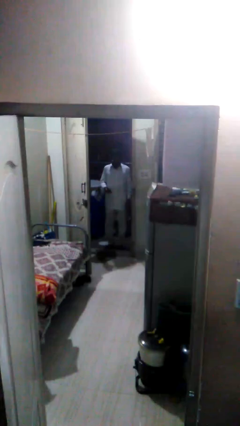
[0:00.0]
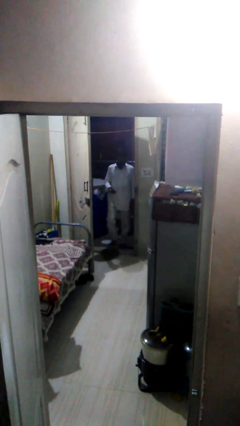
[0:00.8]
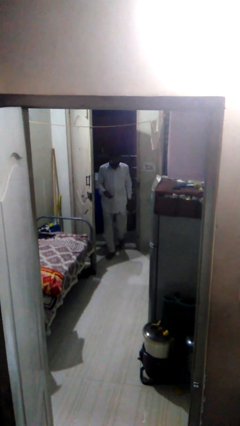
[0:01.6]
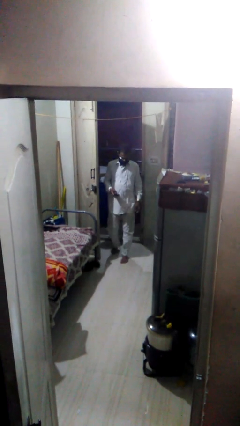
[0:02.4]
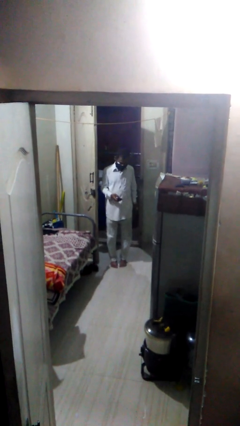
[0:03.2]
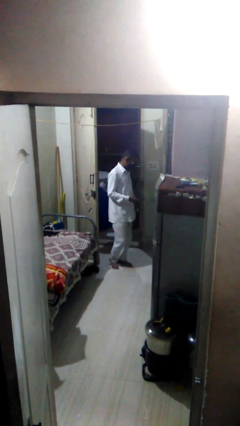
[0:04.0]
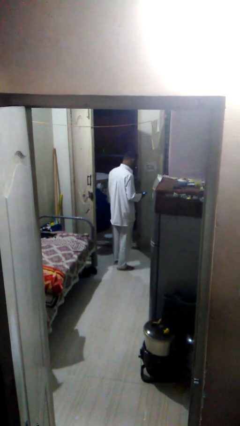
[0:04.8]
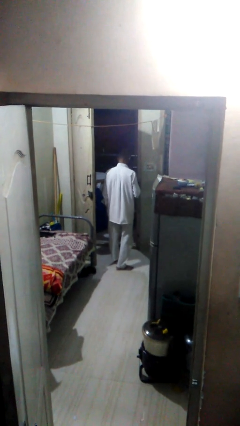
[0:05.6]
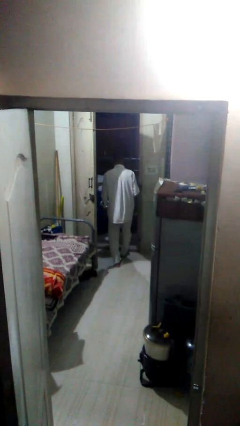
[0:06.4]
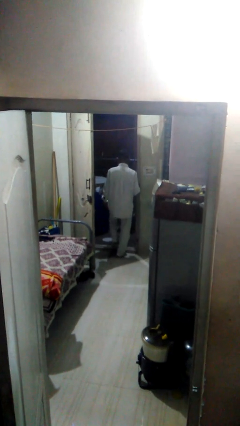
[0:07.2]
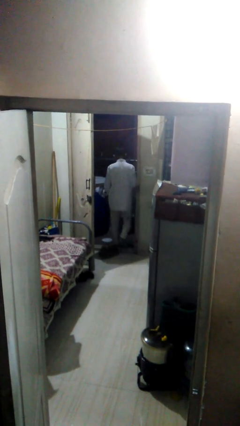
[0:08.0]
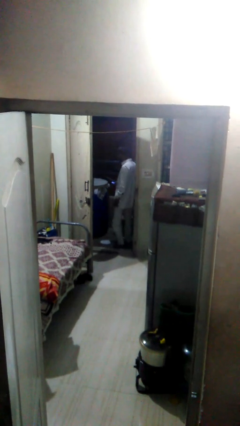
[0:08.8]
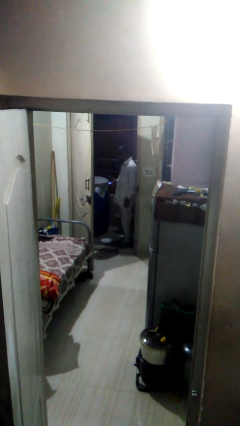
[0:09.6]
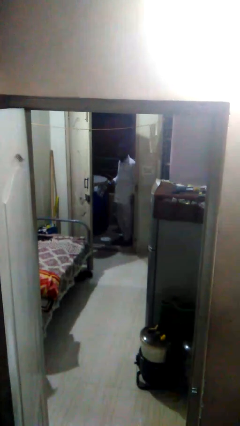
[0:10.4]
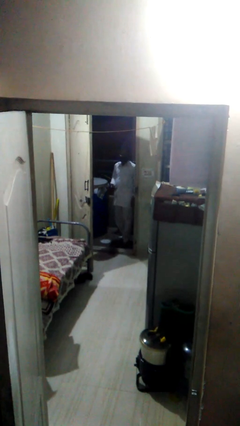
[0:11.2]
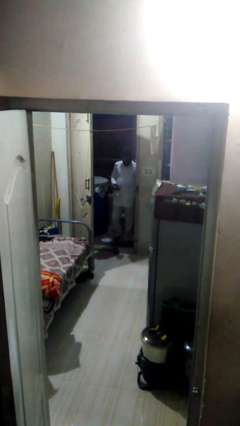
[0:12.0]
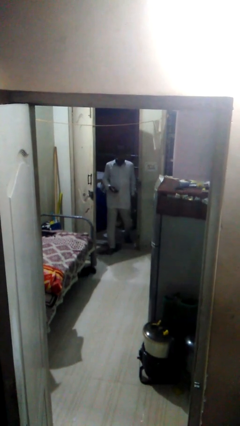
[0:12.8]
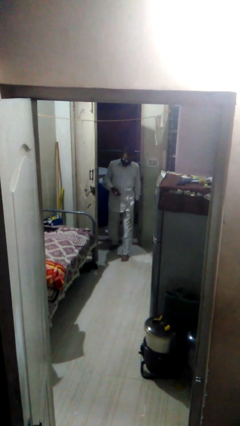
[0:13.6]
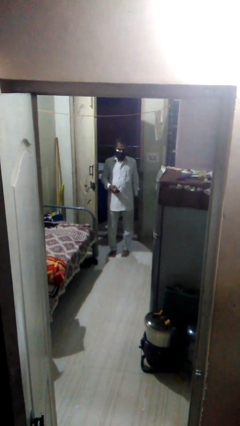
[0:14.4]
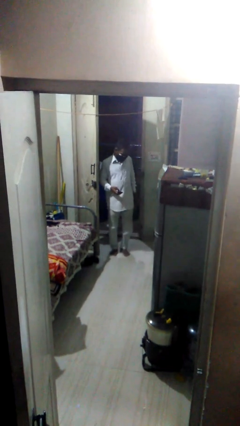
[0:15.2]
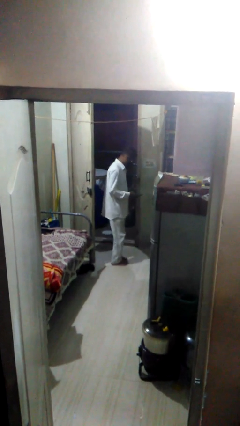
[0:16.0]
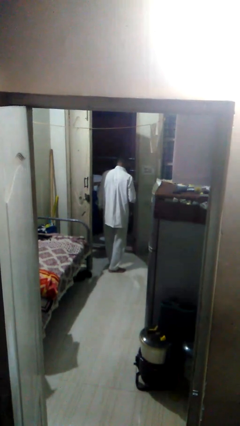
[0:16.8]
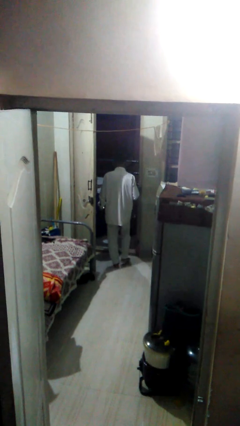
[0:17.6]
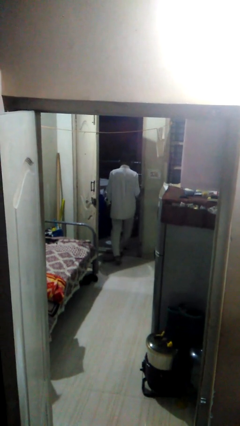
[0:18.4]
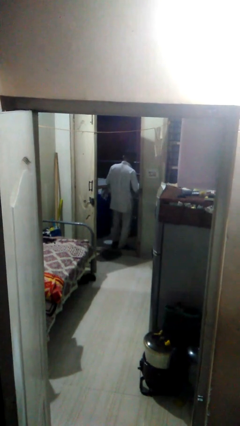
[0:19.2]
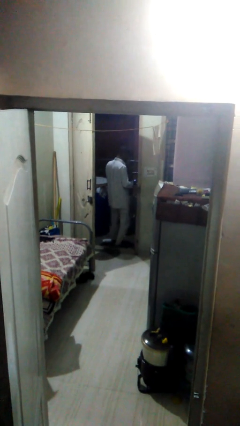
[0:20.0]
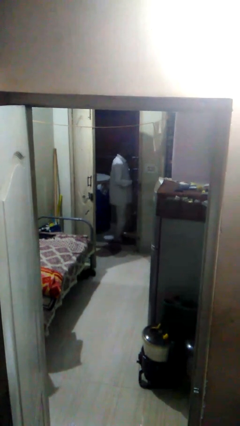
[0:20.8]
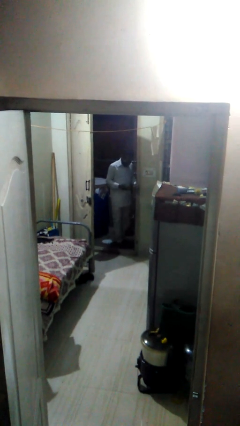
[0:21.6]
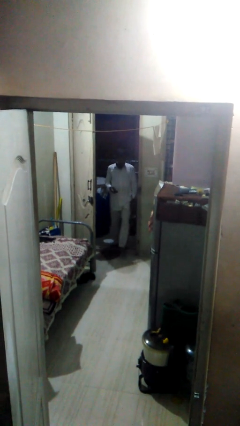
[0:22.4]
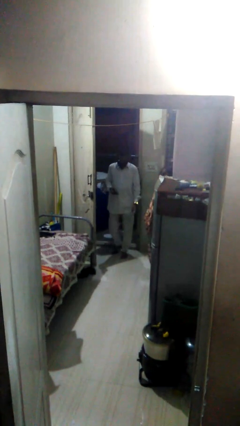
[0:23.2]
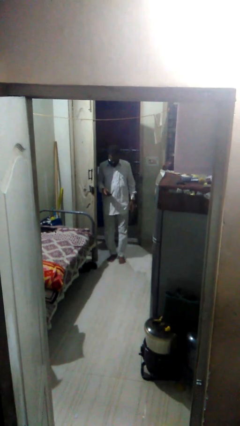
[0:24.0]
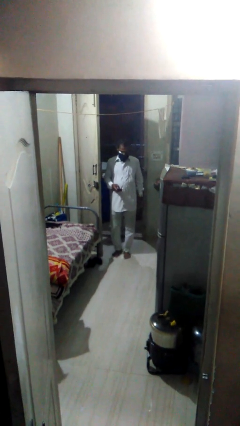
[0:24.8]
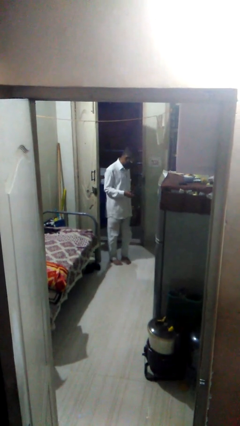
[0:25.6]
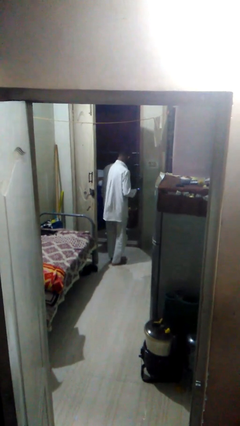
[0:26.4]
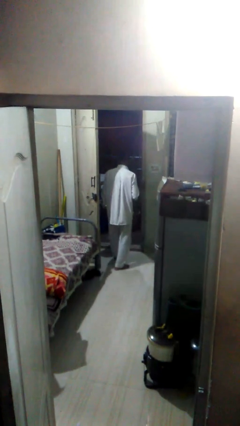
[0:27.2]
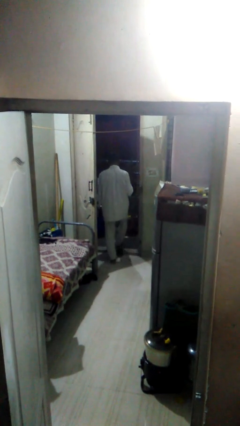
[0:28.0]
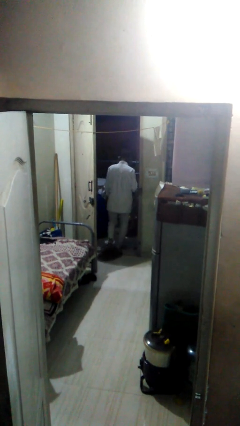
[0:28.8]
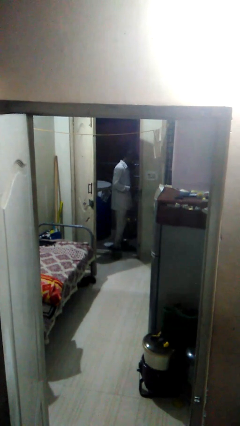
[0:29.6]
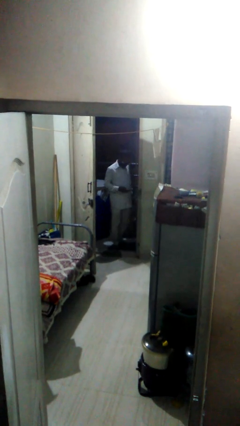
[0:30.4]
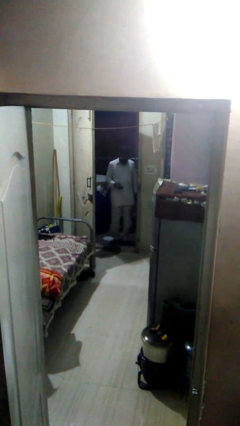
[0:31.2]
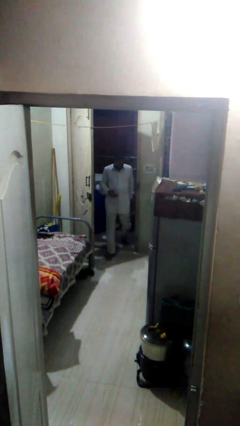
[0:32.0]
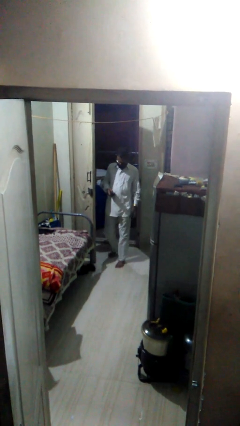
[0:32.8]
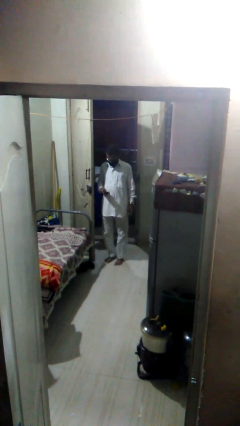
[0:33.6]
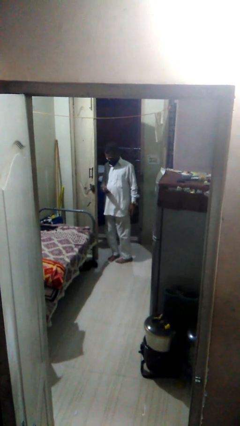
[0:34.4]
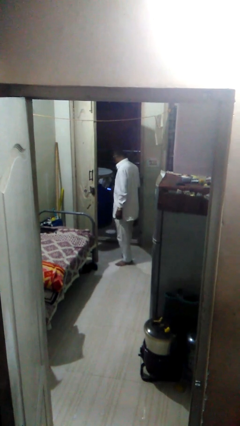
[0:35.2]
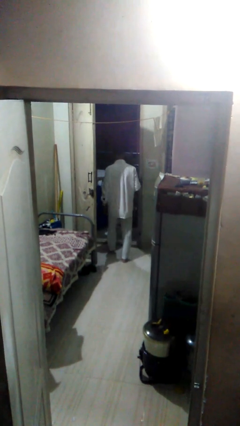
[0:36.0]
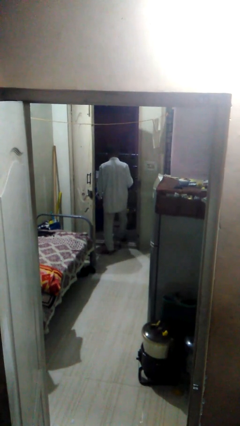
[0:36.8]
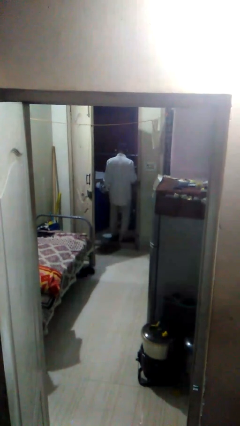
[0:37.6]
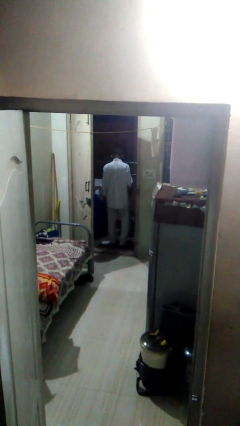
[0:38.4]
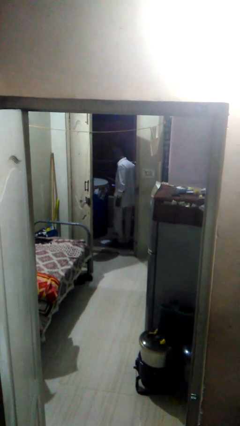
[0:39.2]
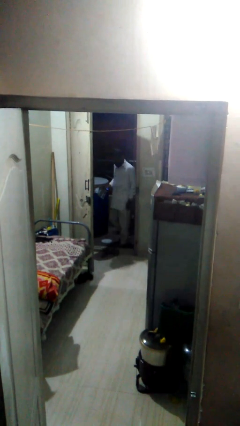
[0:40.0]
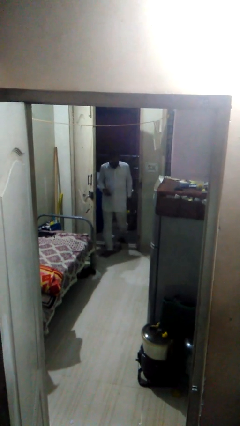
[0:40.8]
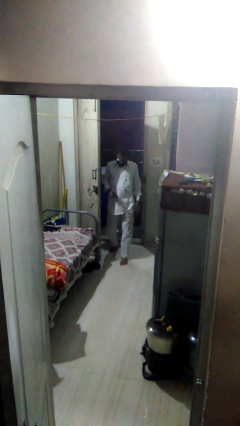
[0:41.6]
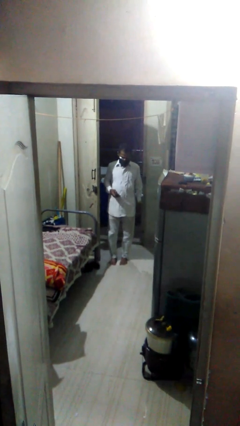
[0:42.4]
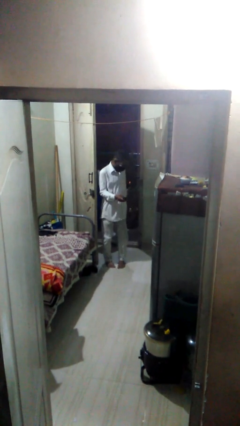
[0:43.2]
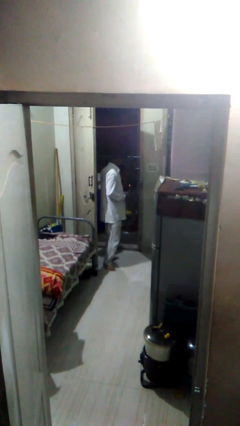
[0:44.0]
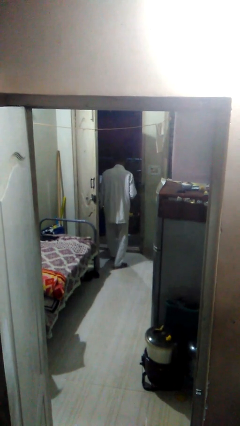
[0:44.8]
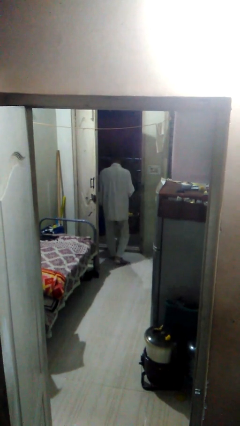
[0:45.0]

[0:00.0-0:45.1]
person texts on phone

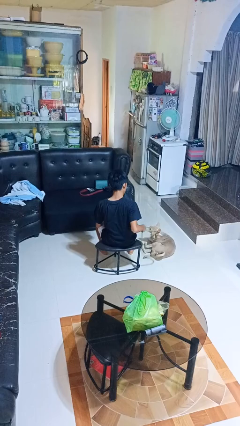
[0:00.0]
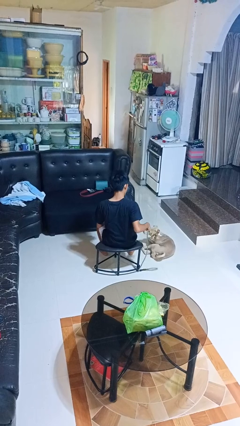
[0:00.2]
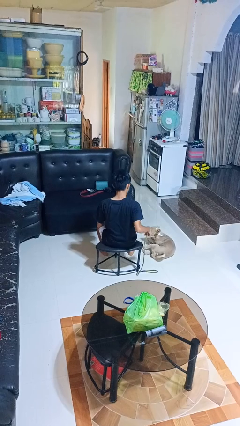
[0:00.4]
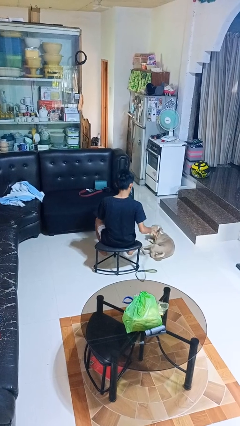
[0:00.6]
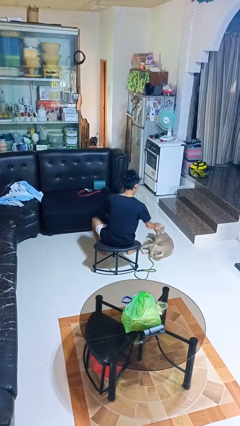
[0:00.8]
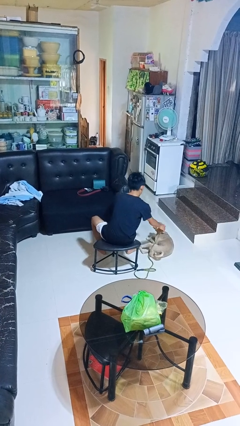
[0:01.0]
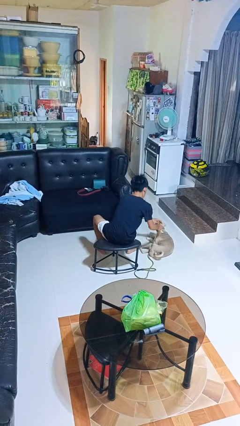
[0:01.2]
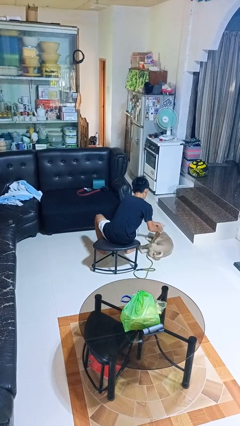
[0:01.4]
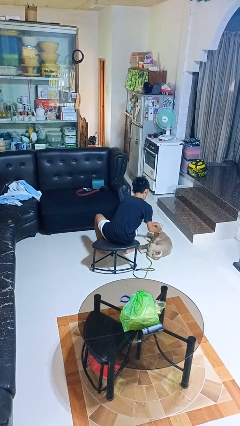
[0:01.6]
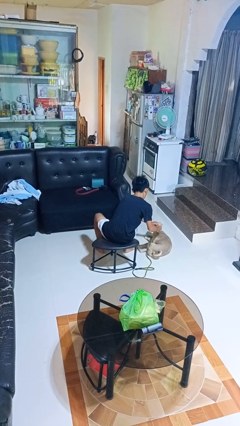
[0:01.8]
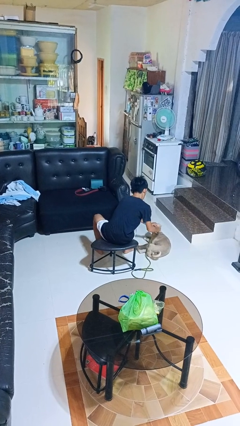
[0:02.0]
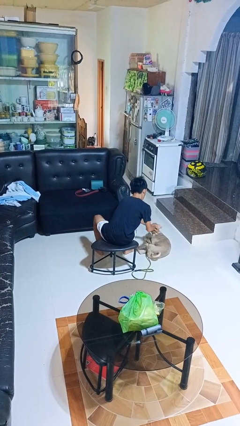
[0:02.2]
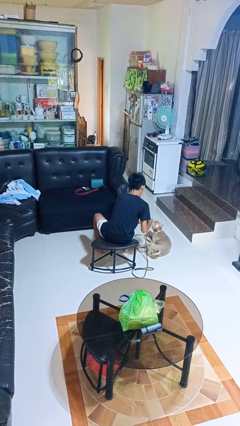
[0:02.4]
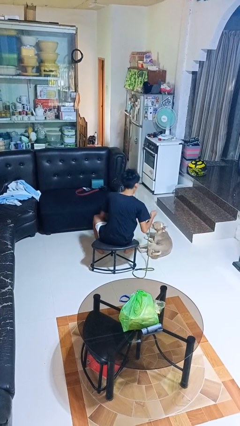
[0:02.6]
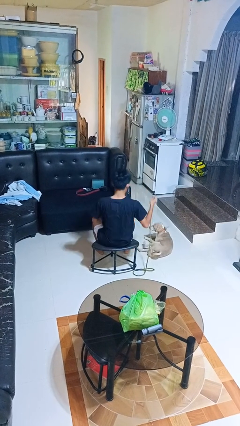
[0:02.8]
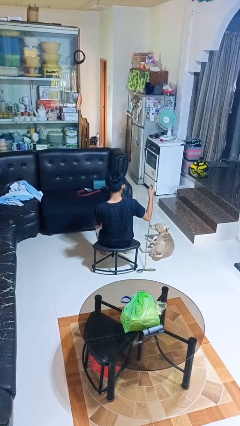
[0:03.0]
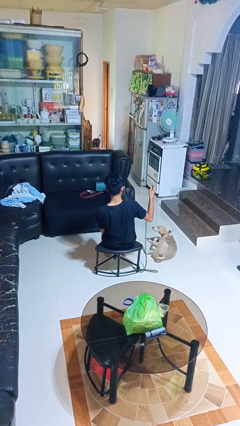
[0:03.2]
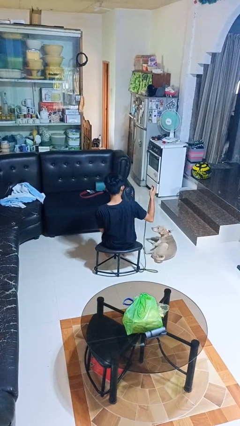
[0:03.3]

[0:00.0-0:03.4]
person unattaches leash from dog

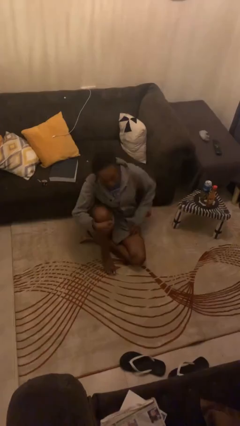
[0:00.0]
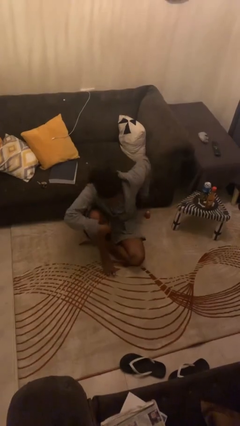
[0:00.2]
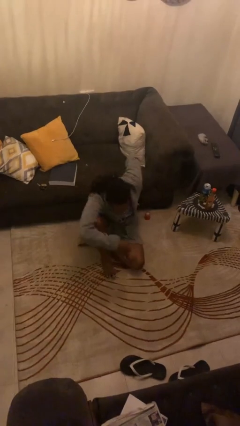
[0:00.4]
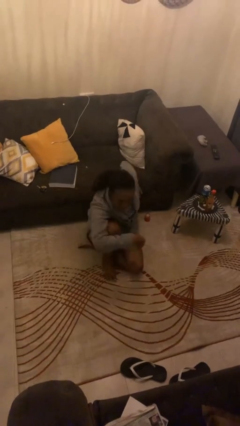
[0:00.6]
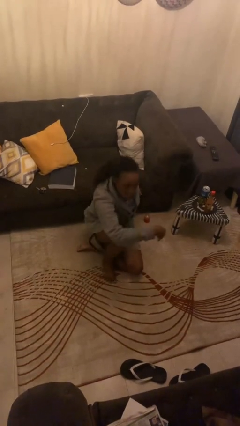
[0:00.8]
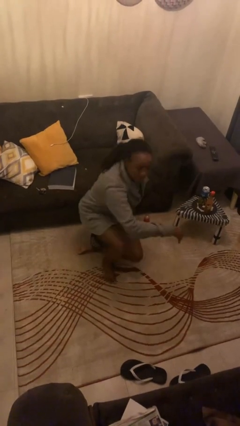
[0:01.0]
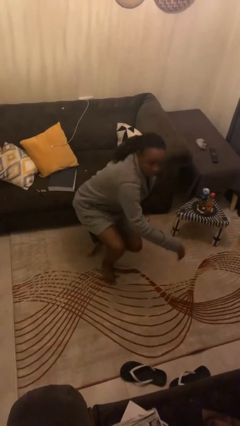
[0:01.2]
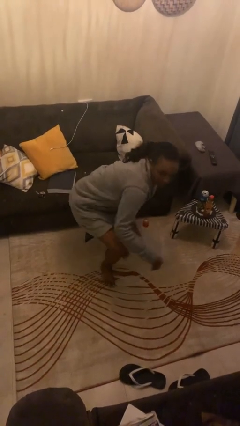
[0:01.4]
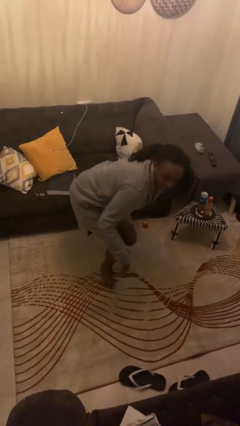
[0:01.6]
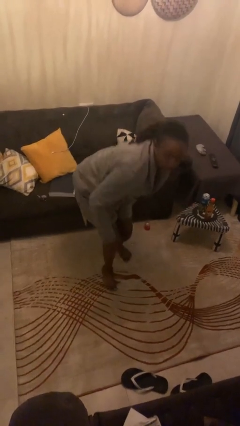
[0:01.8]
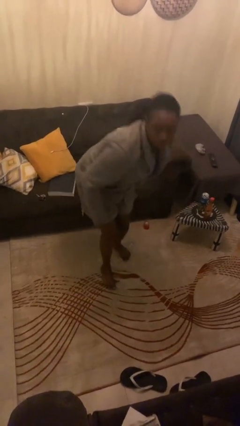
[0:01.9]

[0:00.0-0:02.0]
person stands up from floor

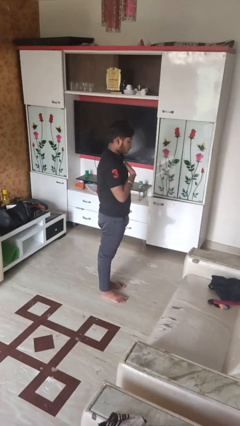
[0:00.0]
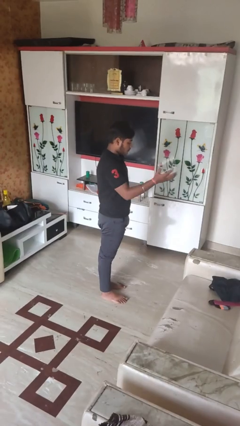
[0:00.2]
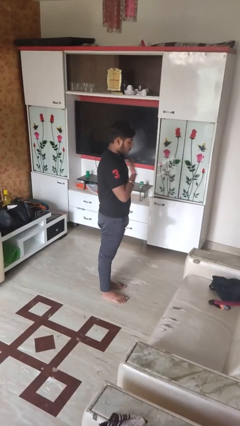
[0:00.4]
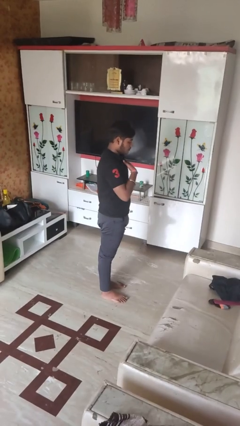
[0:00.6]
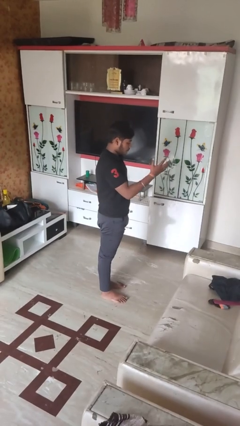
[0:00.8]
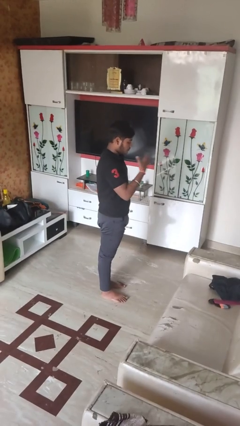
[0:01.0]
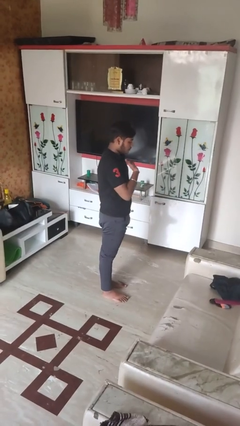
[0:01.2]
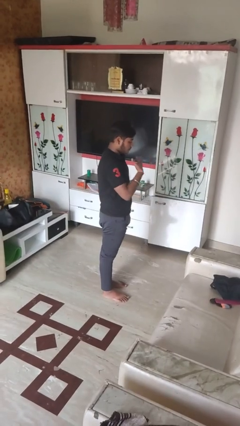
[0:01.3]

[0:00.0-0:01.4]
person drums on chest
